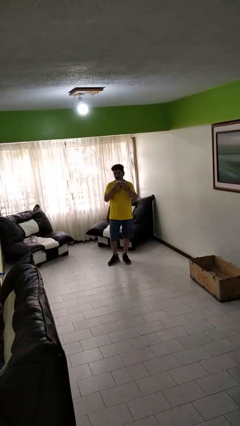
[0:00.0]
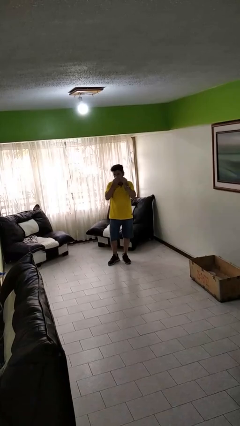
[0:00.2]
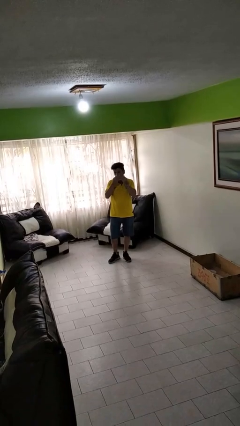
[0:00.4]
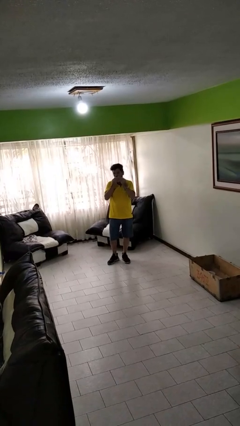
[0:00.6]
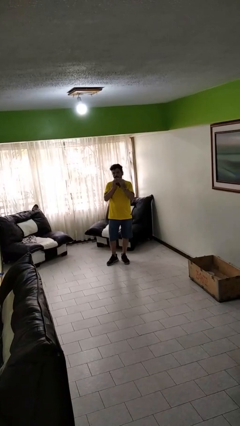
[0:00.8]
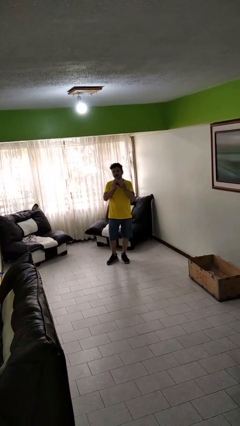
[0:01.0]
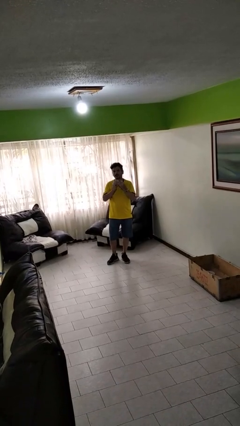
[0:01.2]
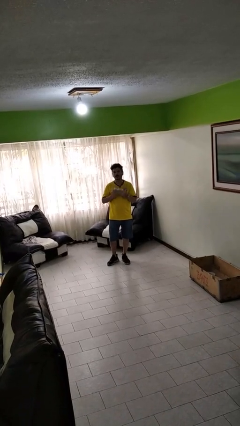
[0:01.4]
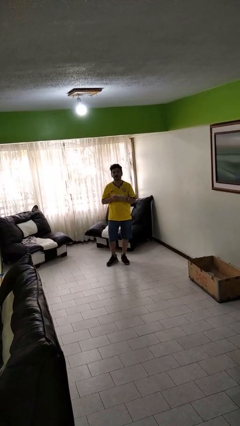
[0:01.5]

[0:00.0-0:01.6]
person wipes mouth with napkin

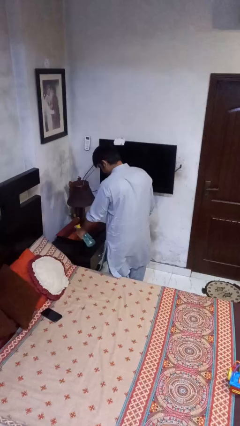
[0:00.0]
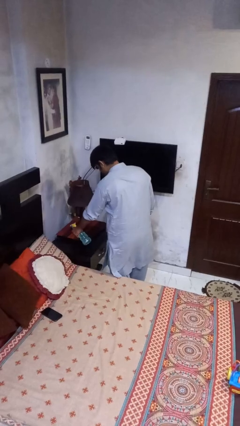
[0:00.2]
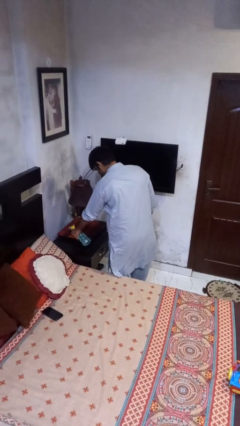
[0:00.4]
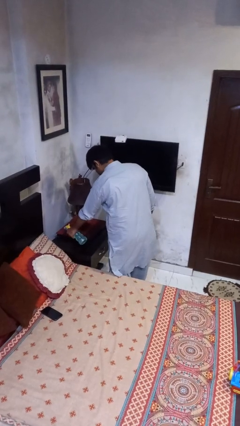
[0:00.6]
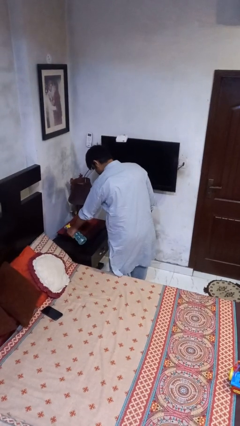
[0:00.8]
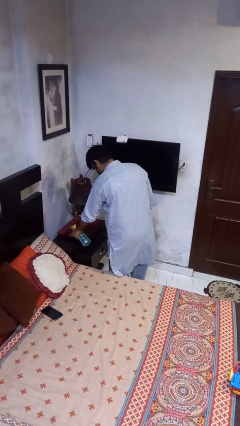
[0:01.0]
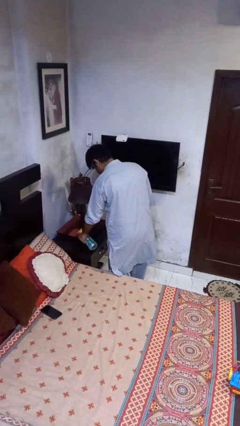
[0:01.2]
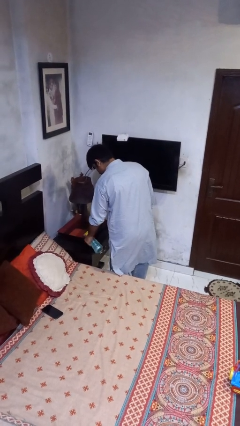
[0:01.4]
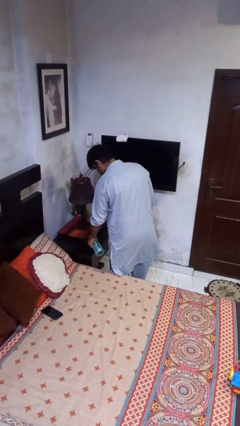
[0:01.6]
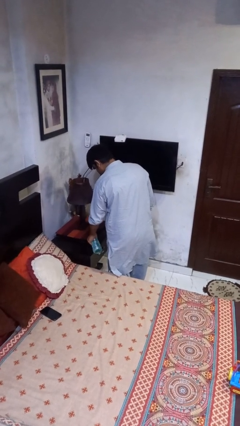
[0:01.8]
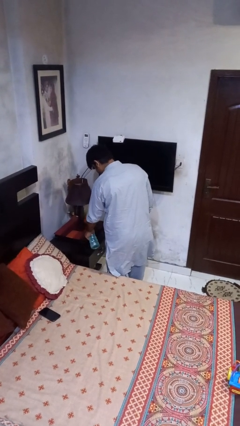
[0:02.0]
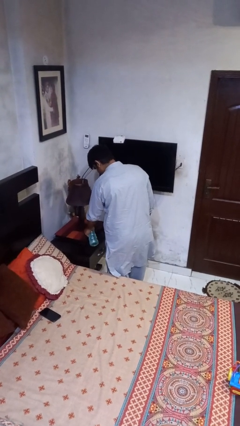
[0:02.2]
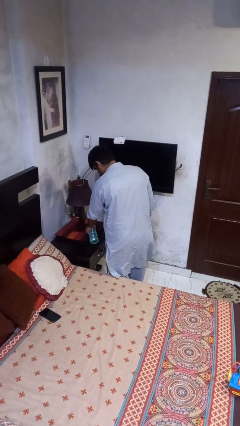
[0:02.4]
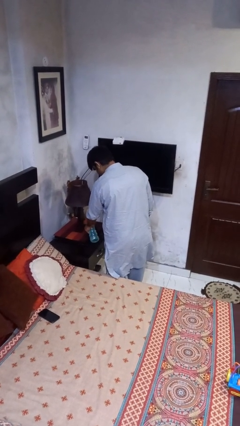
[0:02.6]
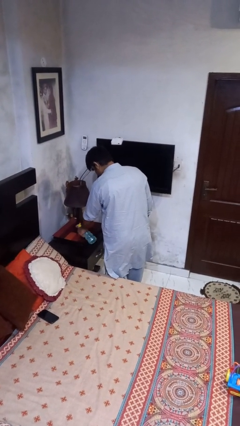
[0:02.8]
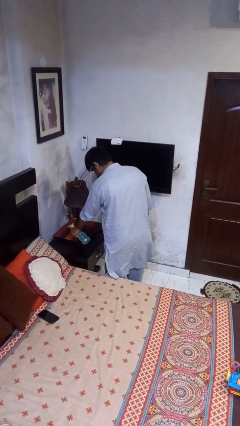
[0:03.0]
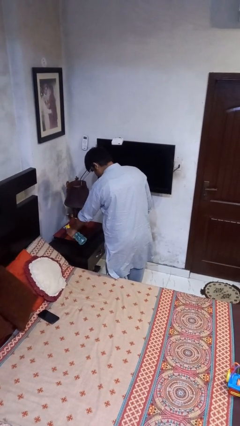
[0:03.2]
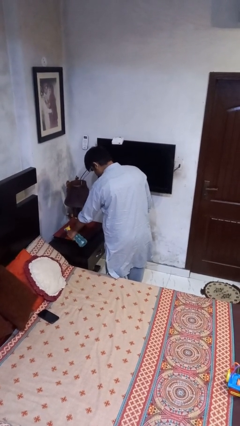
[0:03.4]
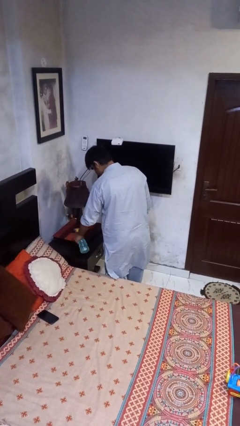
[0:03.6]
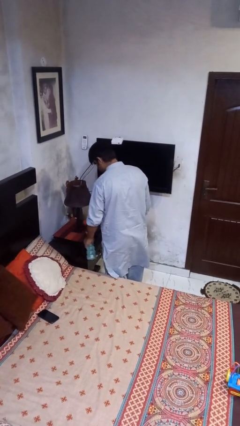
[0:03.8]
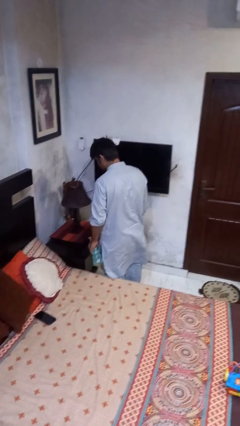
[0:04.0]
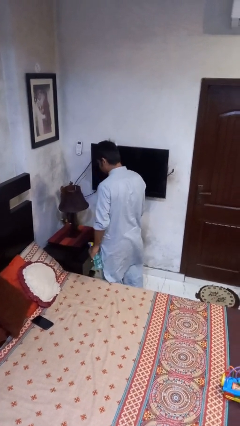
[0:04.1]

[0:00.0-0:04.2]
person sprays from bottle

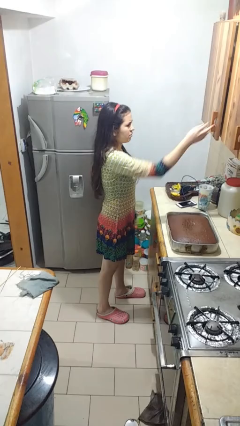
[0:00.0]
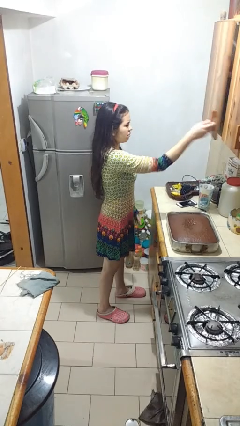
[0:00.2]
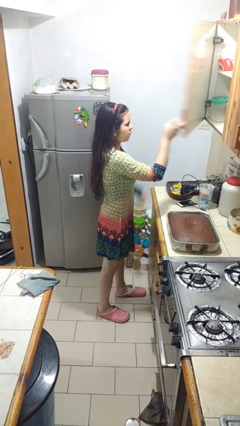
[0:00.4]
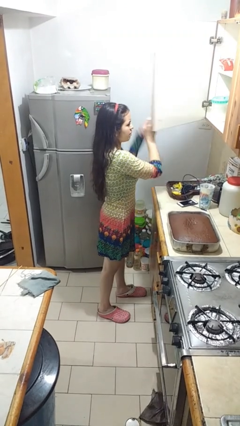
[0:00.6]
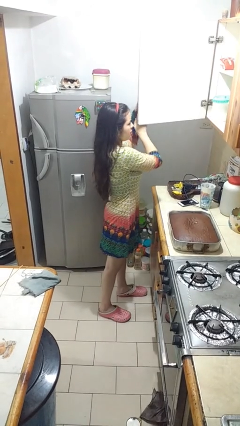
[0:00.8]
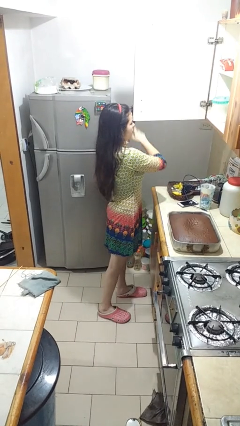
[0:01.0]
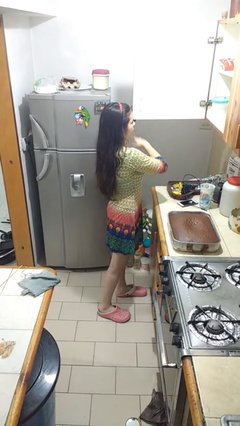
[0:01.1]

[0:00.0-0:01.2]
person opens cabinet

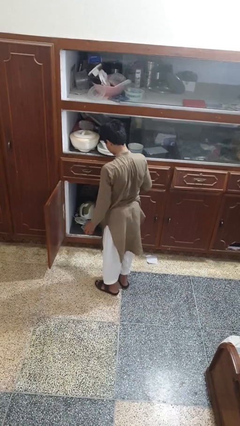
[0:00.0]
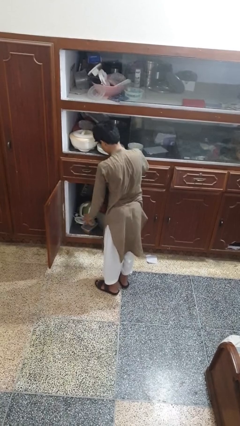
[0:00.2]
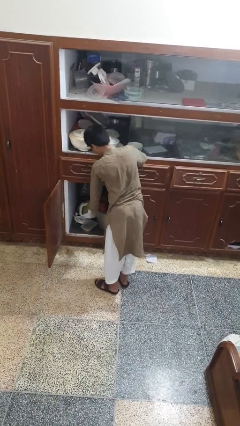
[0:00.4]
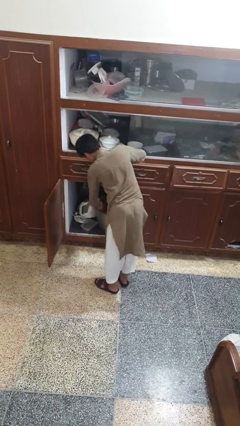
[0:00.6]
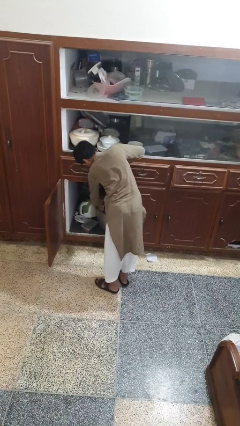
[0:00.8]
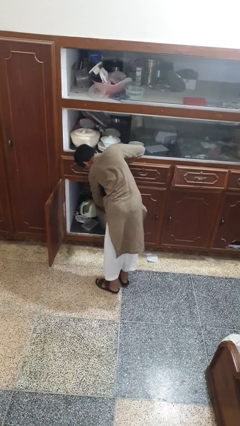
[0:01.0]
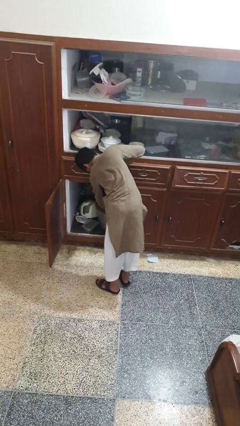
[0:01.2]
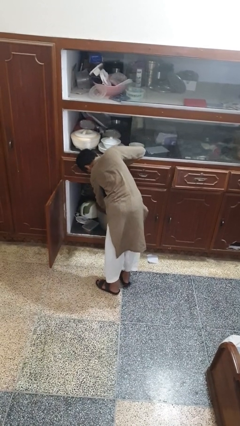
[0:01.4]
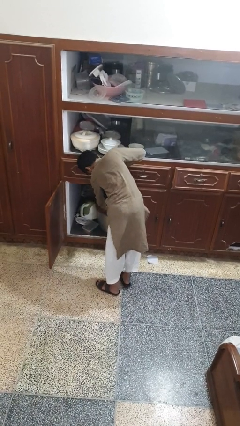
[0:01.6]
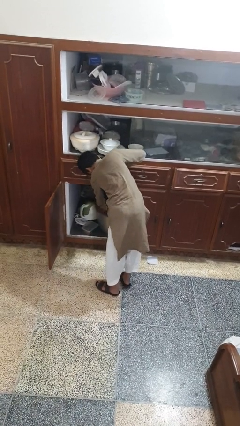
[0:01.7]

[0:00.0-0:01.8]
person puts object in cabinet

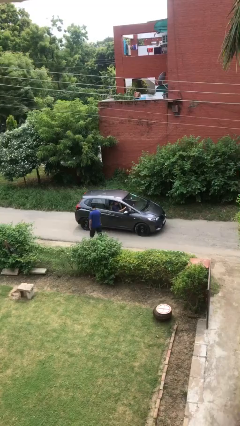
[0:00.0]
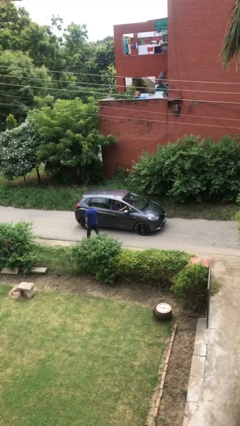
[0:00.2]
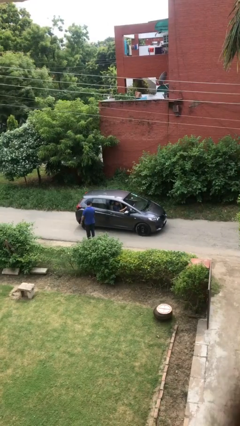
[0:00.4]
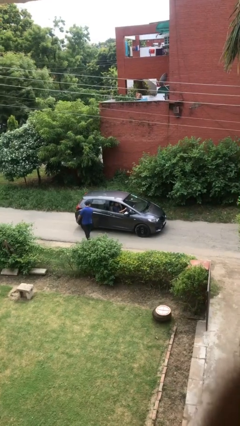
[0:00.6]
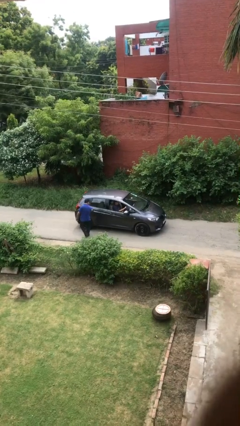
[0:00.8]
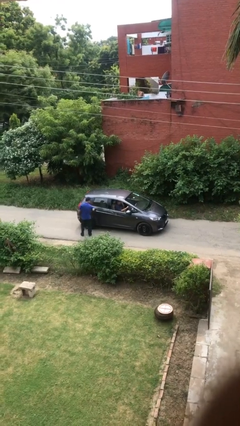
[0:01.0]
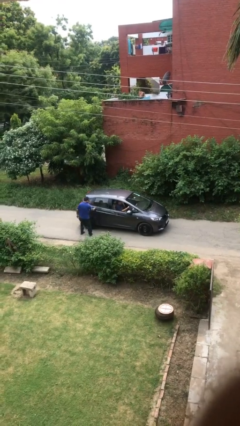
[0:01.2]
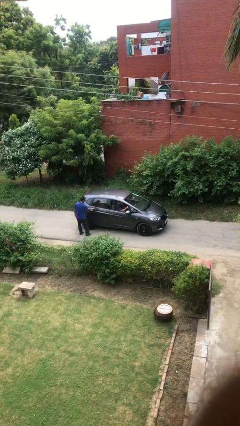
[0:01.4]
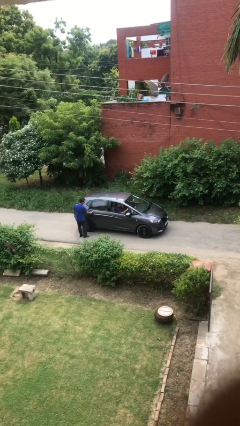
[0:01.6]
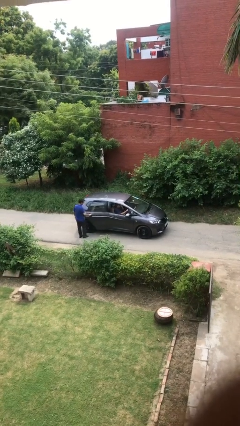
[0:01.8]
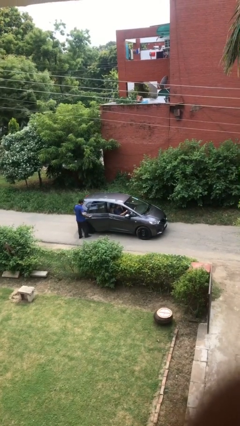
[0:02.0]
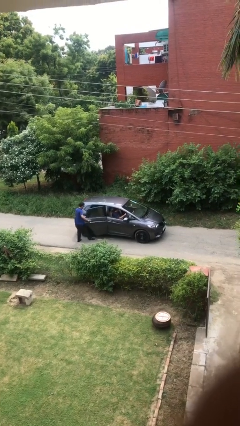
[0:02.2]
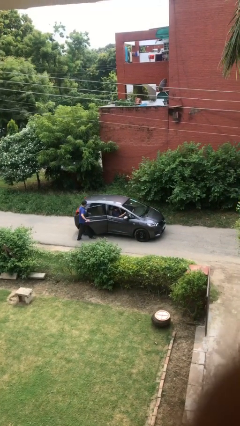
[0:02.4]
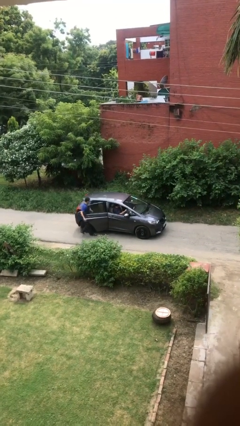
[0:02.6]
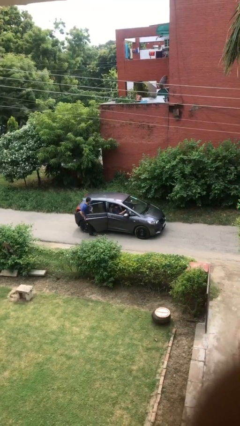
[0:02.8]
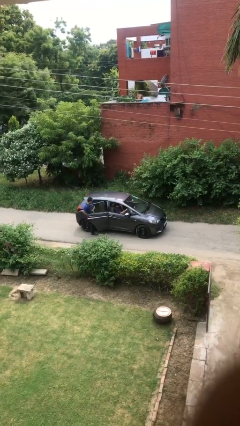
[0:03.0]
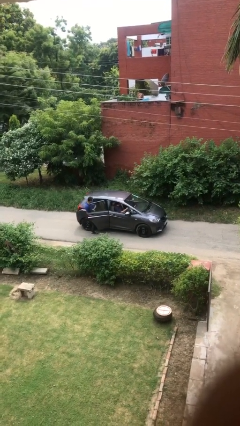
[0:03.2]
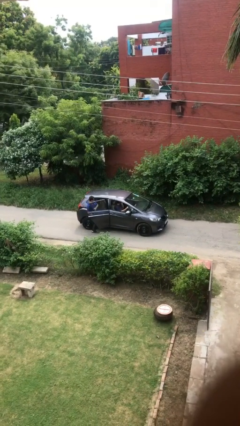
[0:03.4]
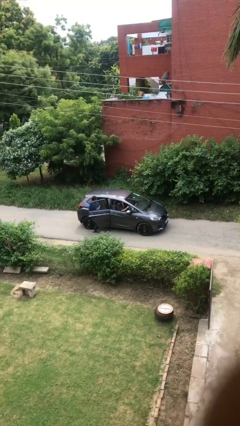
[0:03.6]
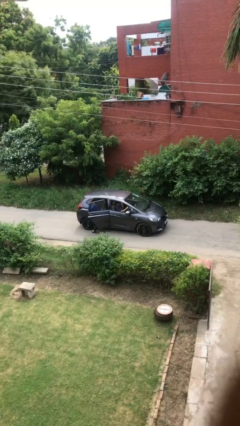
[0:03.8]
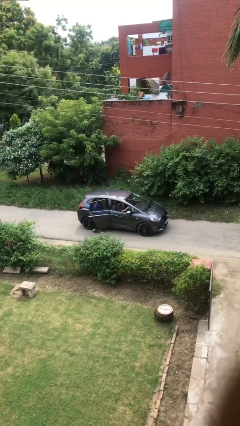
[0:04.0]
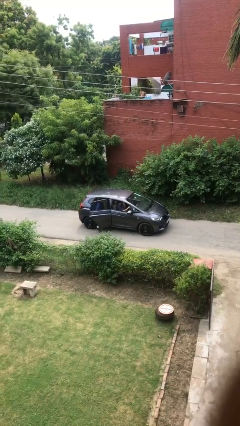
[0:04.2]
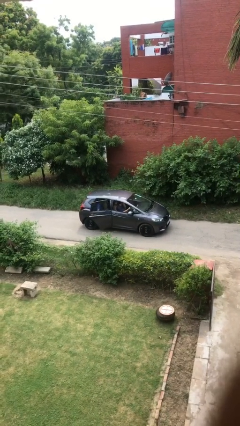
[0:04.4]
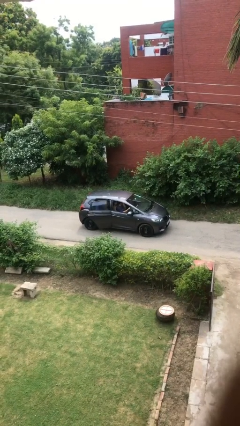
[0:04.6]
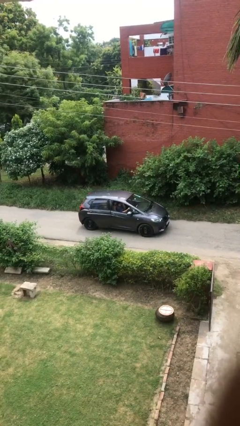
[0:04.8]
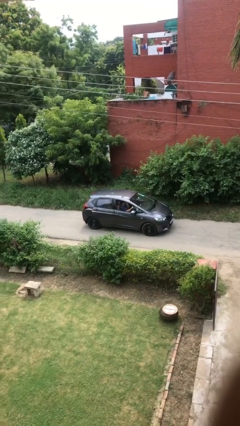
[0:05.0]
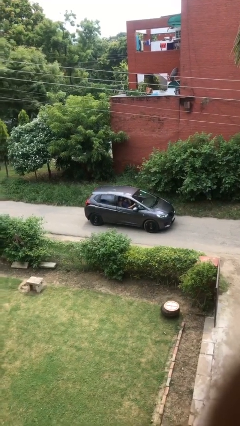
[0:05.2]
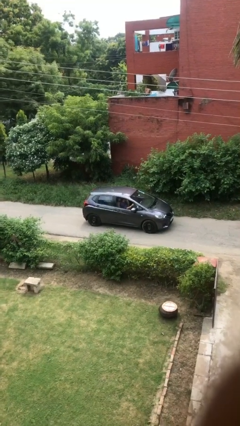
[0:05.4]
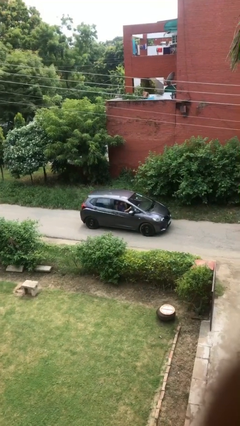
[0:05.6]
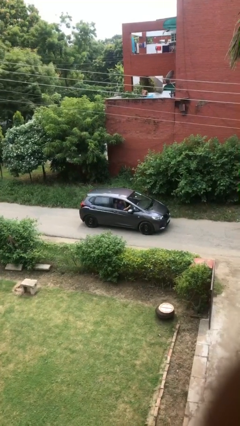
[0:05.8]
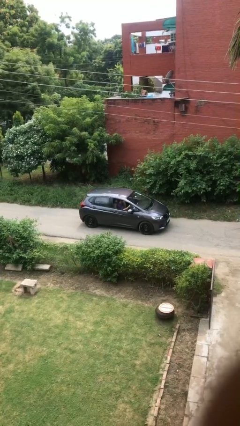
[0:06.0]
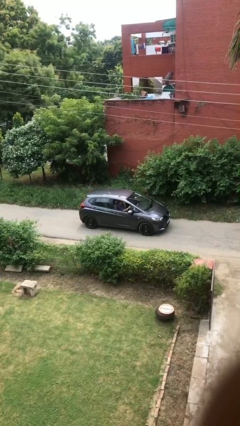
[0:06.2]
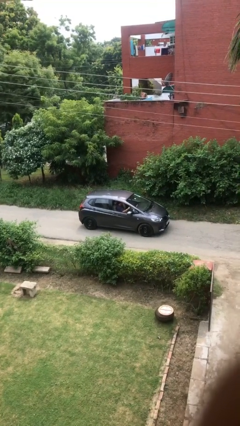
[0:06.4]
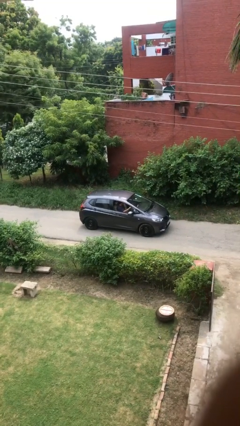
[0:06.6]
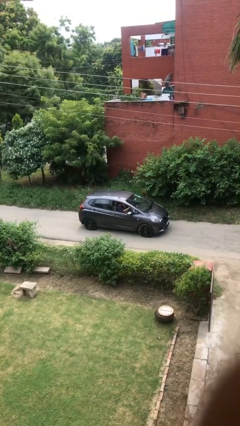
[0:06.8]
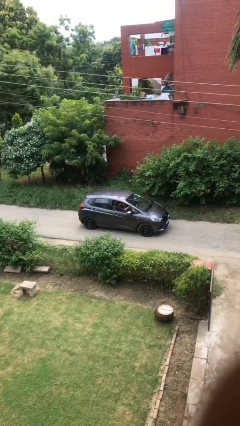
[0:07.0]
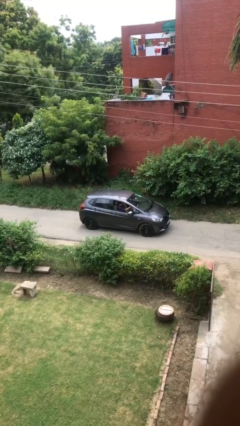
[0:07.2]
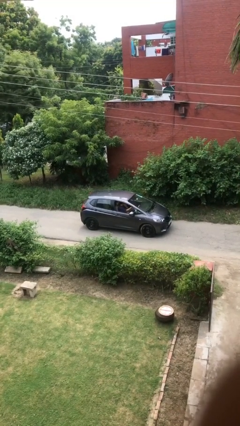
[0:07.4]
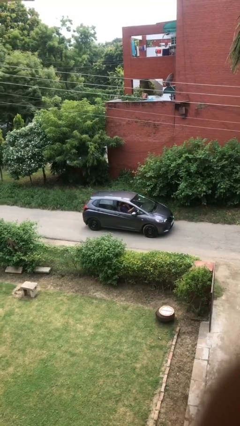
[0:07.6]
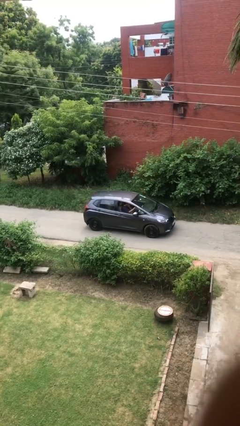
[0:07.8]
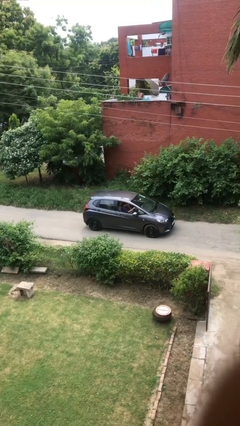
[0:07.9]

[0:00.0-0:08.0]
car picks up person

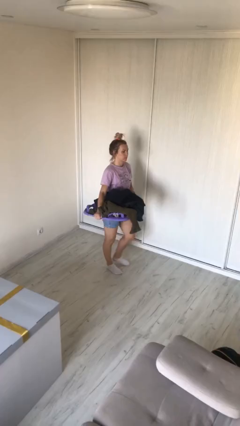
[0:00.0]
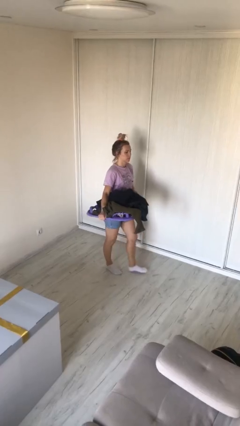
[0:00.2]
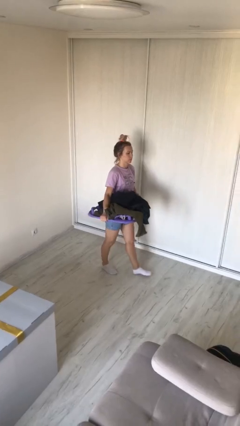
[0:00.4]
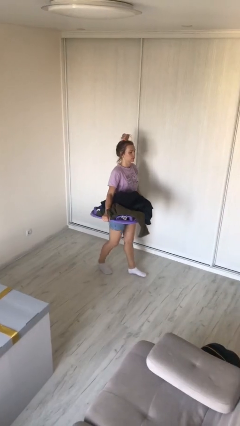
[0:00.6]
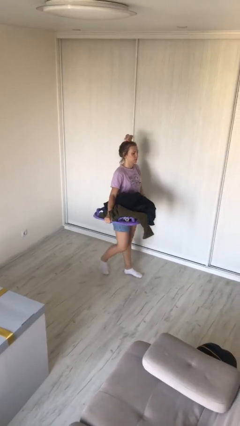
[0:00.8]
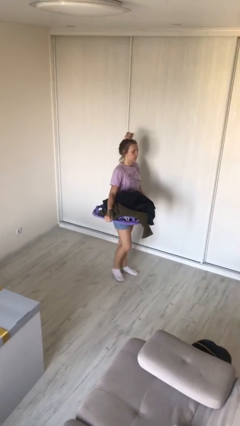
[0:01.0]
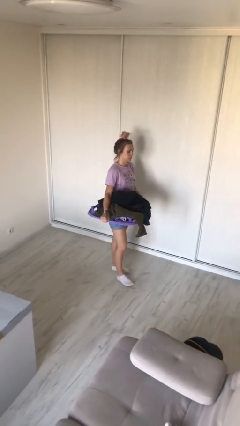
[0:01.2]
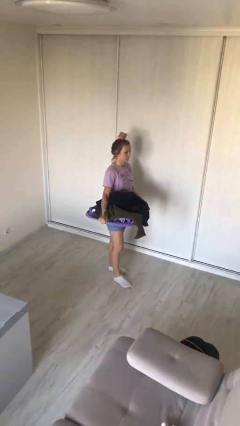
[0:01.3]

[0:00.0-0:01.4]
person carries laundry basket
